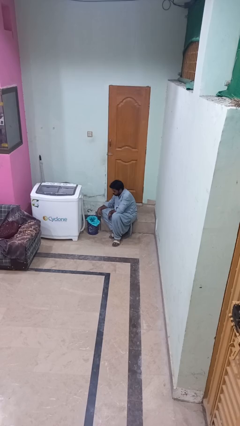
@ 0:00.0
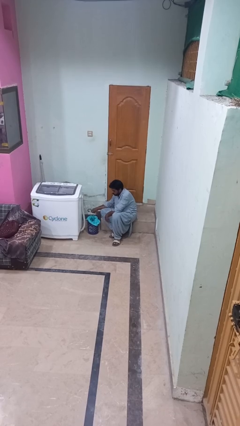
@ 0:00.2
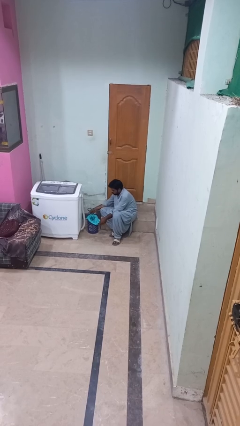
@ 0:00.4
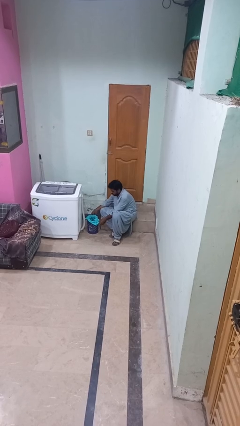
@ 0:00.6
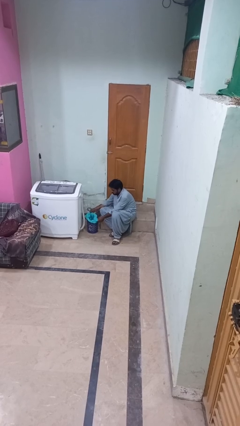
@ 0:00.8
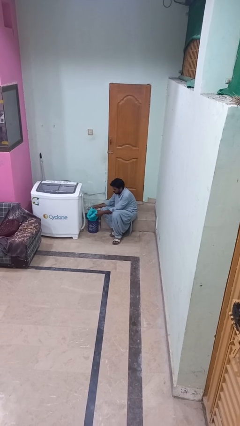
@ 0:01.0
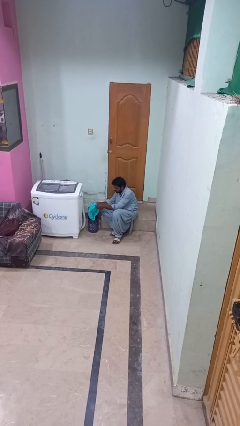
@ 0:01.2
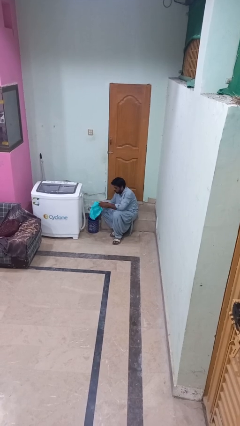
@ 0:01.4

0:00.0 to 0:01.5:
person removes trashbag from trashcan

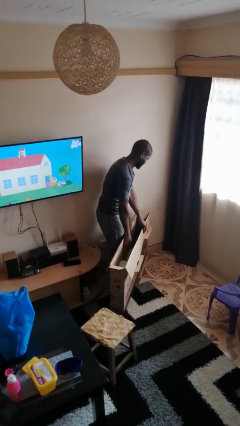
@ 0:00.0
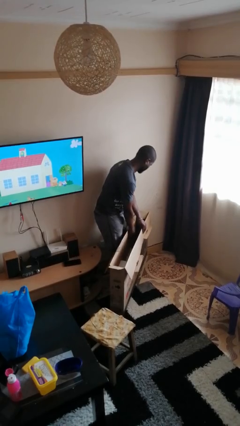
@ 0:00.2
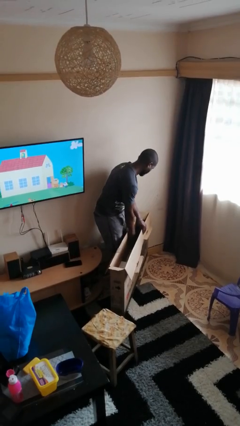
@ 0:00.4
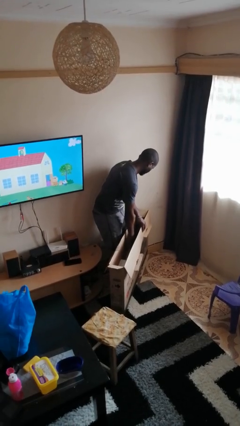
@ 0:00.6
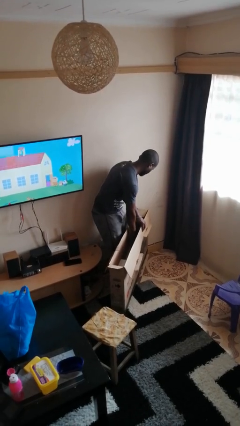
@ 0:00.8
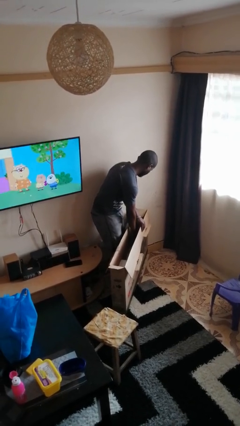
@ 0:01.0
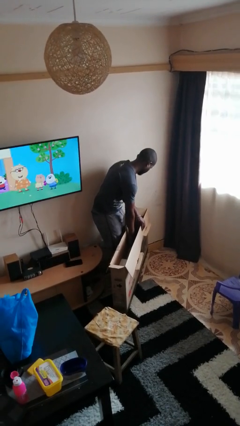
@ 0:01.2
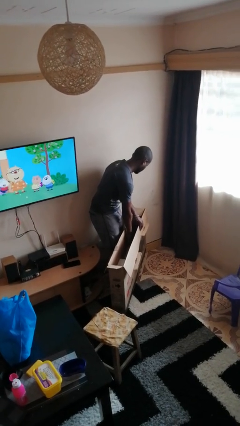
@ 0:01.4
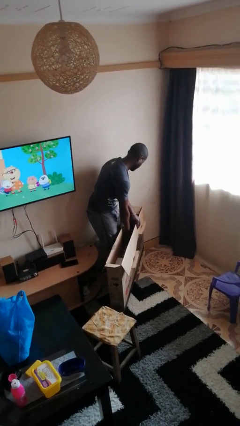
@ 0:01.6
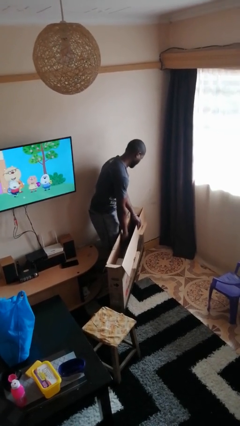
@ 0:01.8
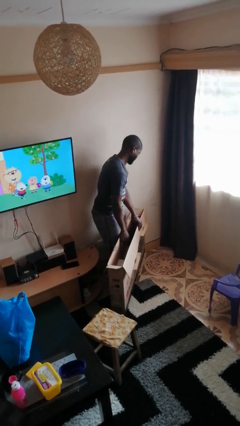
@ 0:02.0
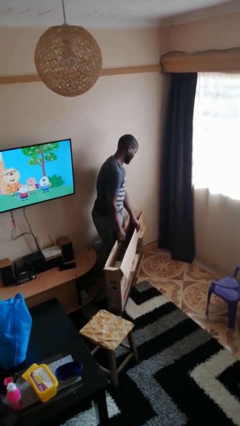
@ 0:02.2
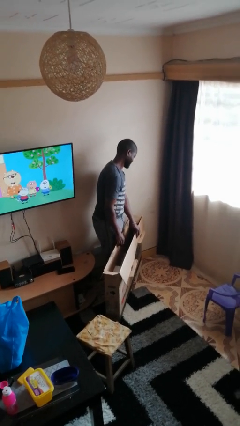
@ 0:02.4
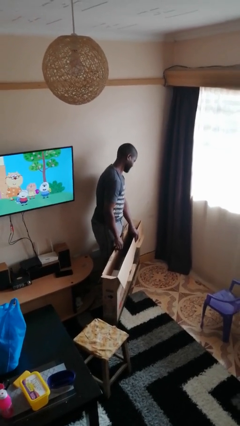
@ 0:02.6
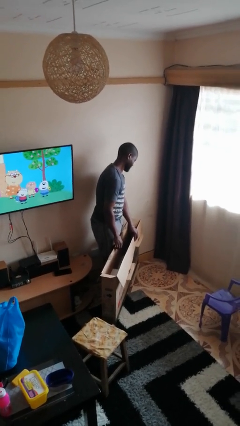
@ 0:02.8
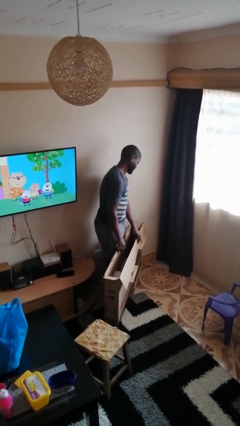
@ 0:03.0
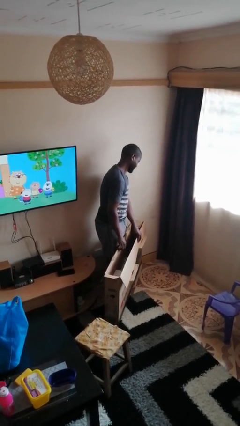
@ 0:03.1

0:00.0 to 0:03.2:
person searches in box

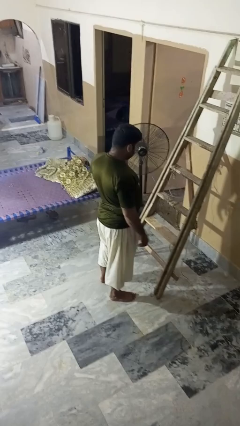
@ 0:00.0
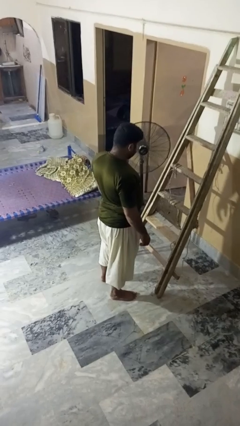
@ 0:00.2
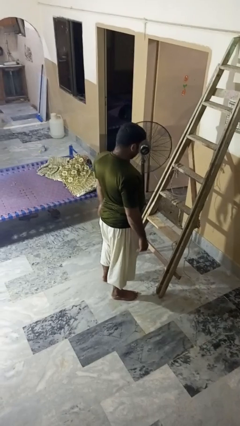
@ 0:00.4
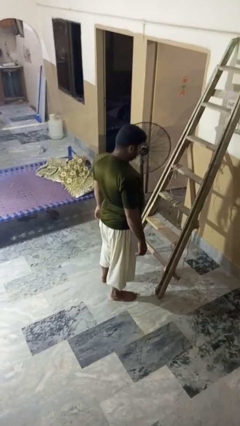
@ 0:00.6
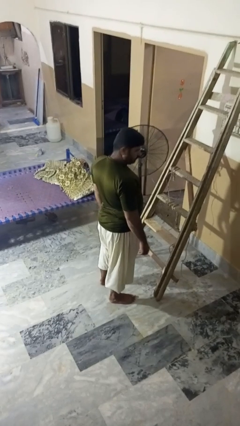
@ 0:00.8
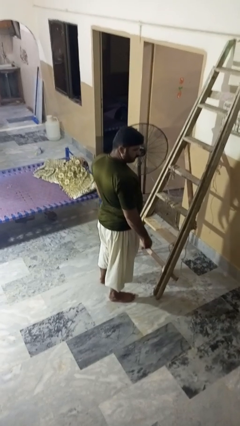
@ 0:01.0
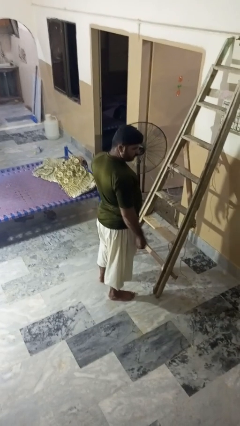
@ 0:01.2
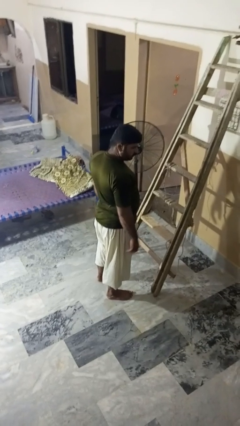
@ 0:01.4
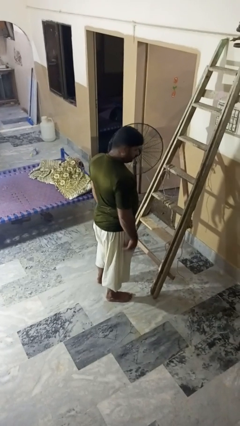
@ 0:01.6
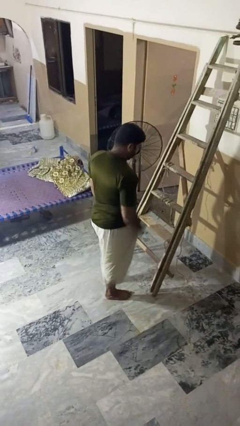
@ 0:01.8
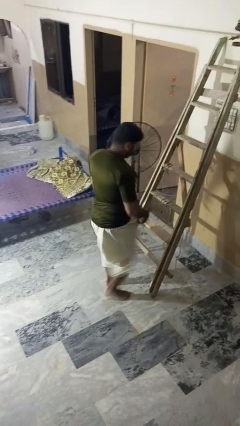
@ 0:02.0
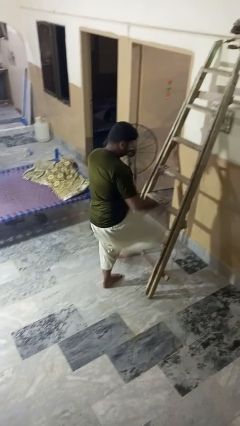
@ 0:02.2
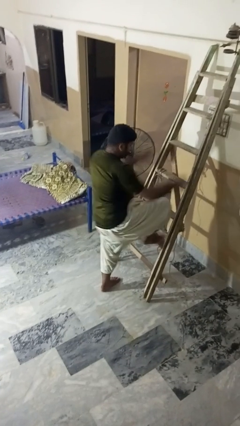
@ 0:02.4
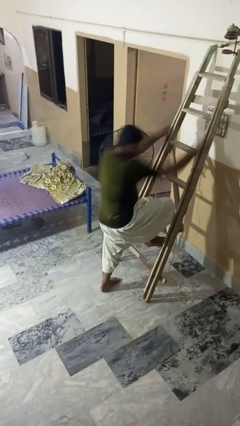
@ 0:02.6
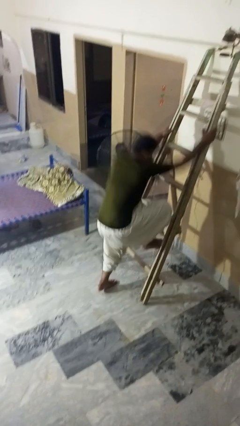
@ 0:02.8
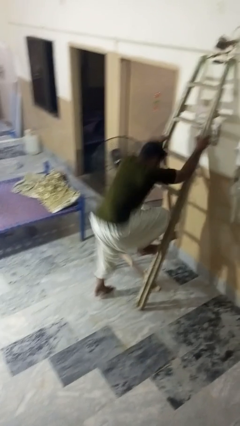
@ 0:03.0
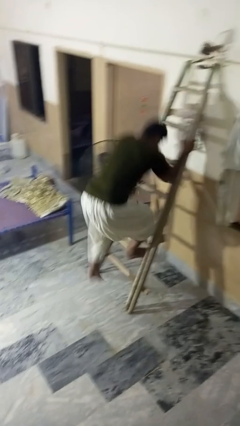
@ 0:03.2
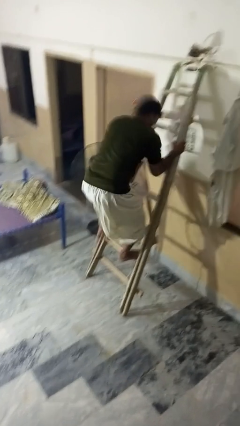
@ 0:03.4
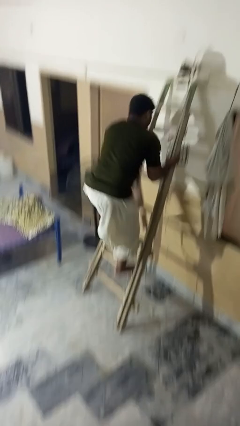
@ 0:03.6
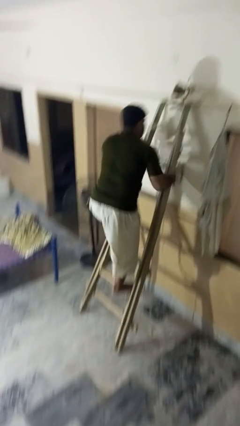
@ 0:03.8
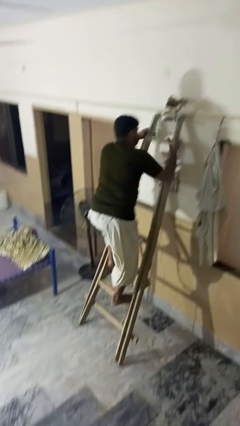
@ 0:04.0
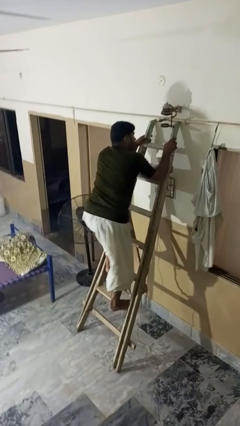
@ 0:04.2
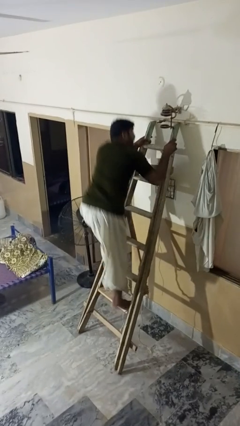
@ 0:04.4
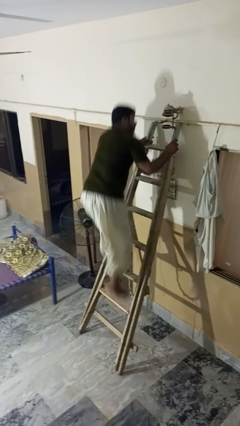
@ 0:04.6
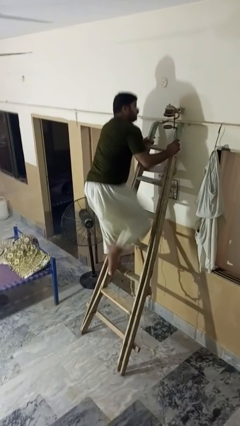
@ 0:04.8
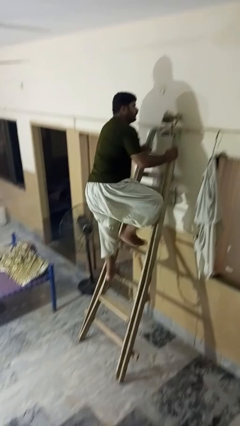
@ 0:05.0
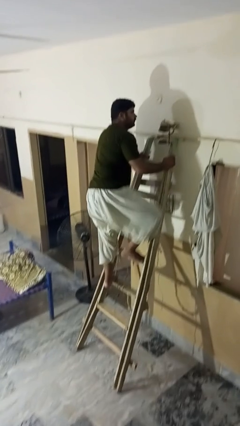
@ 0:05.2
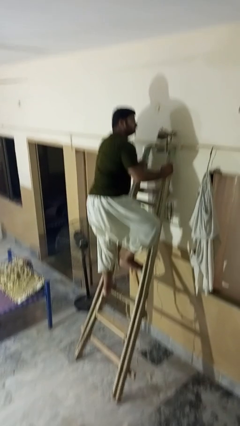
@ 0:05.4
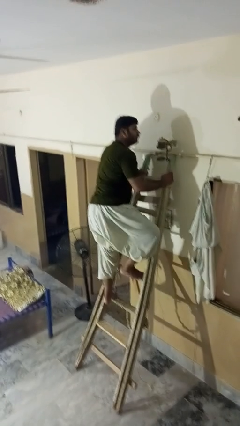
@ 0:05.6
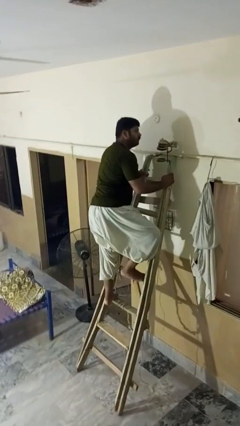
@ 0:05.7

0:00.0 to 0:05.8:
person climbs up ladder

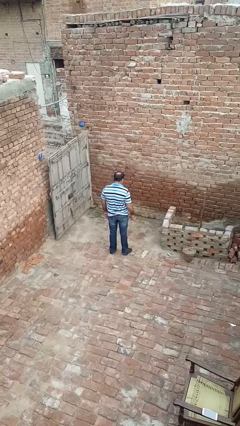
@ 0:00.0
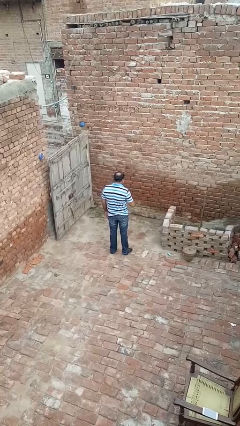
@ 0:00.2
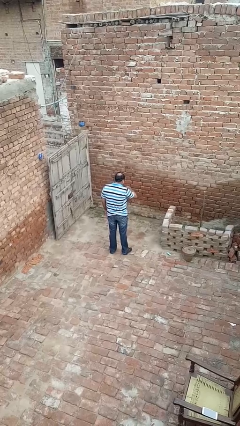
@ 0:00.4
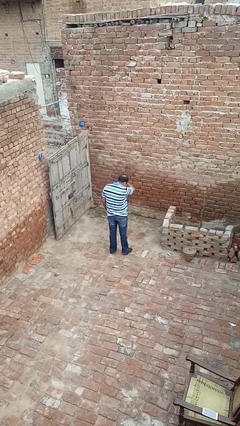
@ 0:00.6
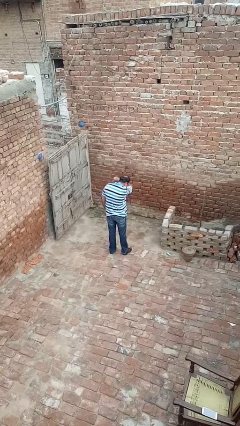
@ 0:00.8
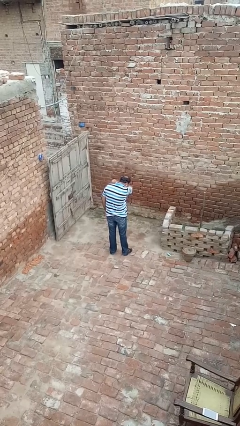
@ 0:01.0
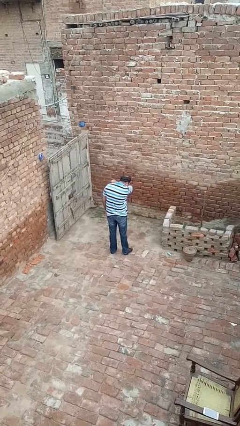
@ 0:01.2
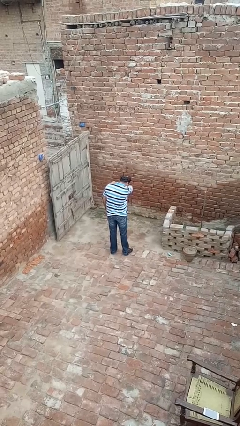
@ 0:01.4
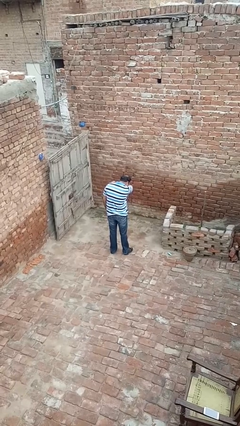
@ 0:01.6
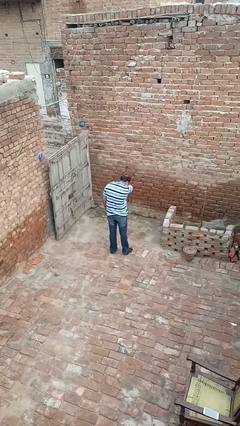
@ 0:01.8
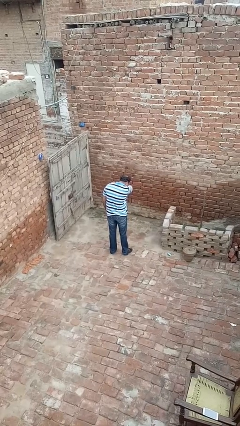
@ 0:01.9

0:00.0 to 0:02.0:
person sneezes into arm

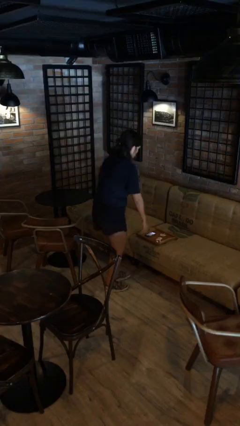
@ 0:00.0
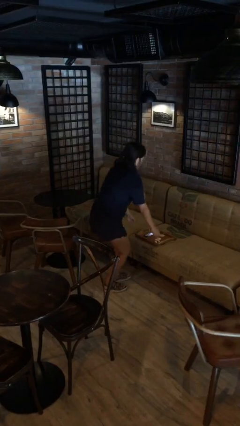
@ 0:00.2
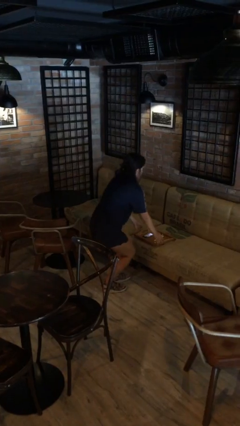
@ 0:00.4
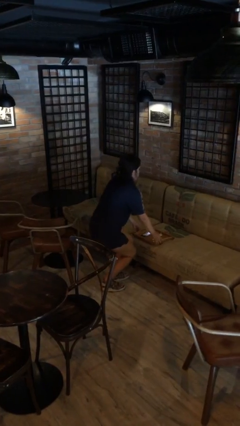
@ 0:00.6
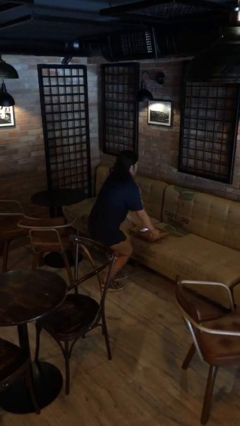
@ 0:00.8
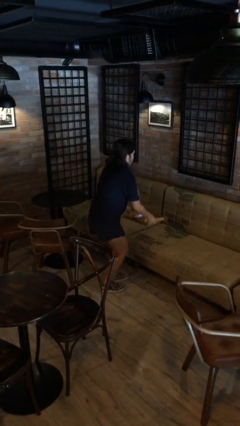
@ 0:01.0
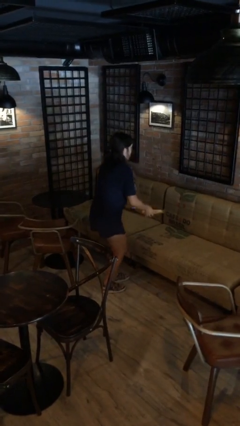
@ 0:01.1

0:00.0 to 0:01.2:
person picks up object from couch

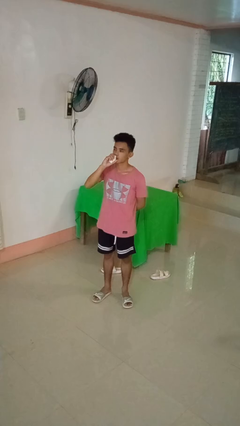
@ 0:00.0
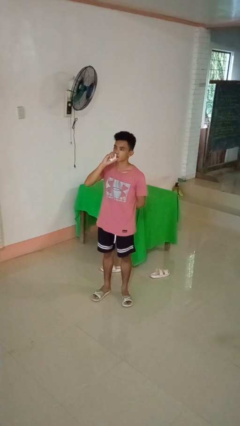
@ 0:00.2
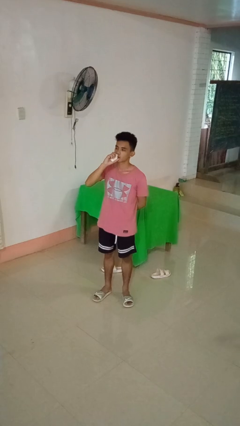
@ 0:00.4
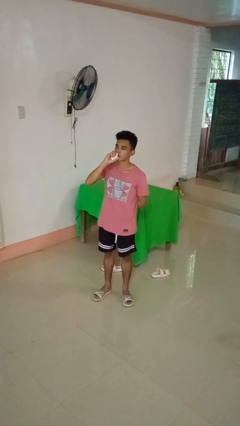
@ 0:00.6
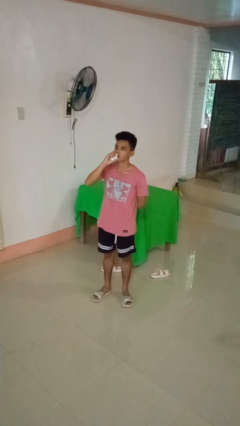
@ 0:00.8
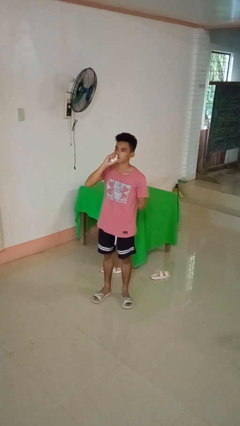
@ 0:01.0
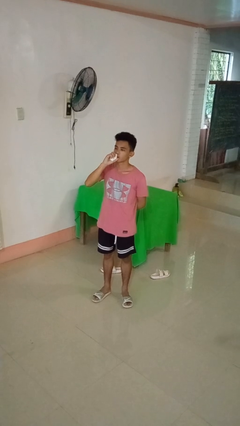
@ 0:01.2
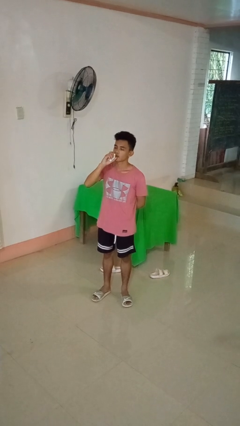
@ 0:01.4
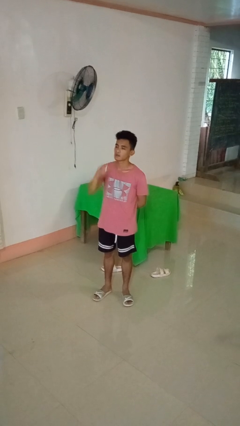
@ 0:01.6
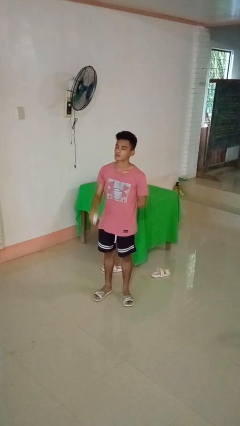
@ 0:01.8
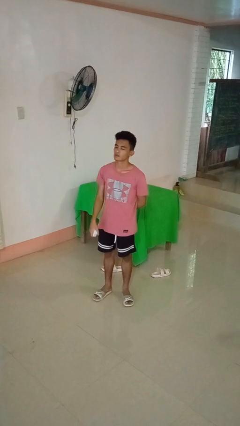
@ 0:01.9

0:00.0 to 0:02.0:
person vapes

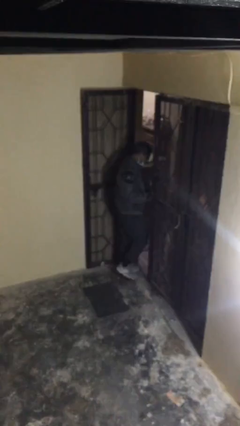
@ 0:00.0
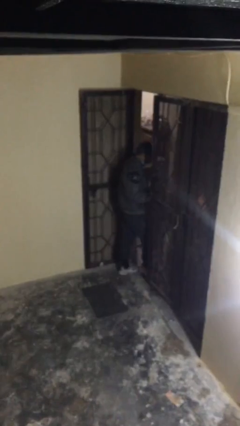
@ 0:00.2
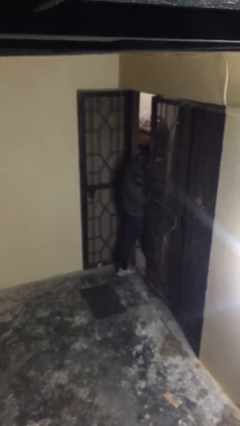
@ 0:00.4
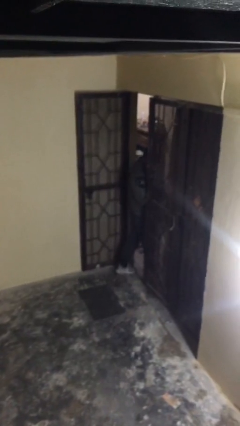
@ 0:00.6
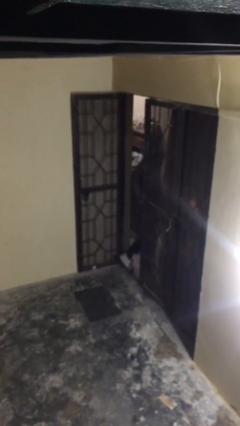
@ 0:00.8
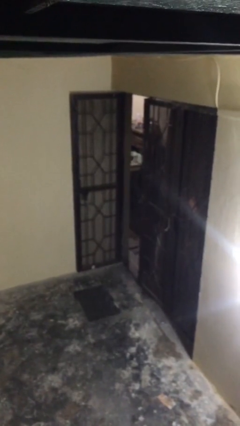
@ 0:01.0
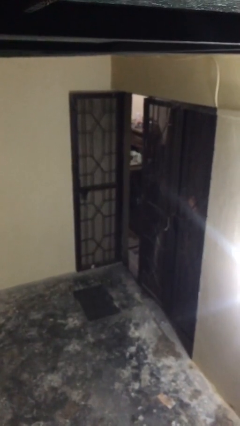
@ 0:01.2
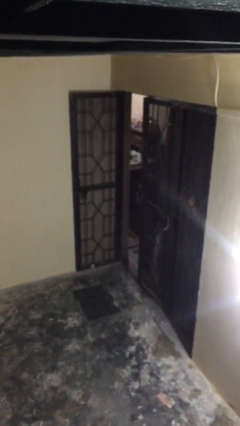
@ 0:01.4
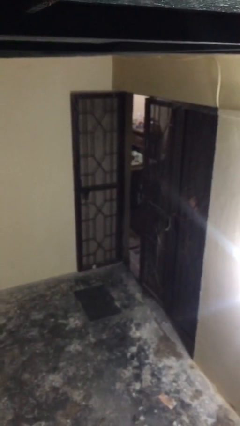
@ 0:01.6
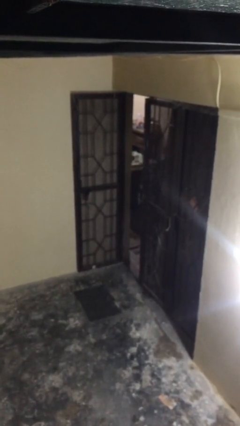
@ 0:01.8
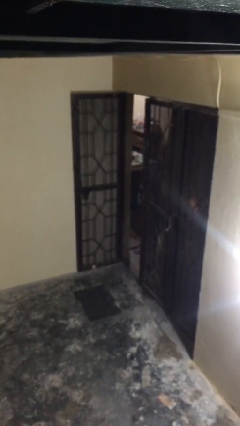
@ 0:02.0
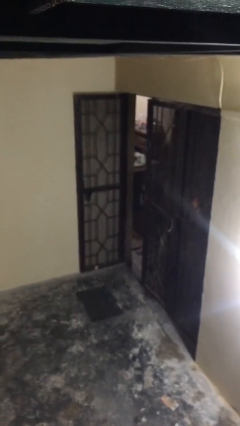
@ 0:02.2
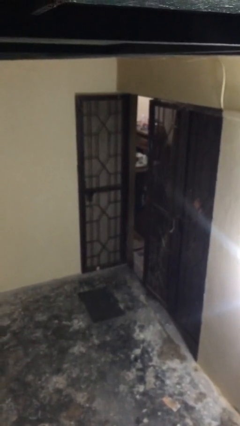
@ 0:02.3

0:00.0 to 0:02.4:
person exits scene through structure
